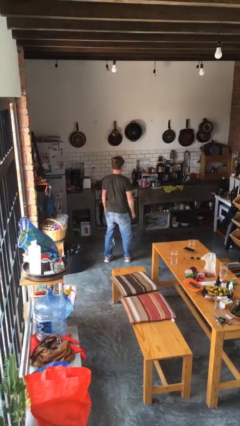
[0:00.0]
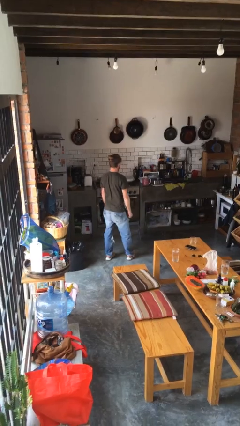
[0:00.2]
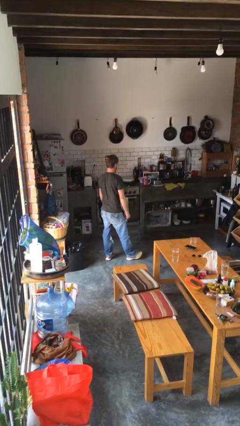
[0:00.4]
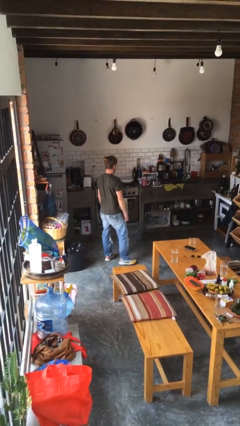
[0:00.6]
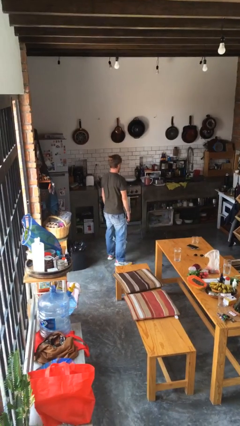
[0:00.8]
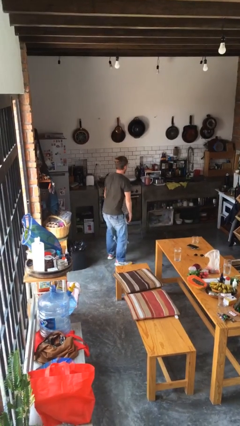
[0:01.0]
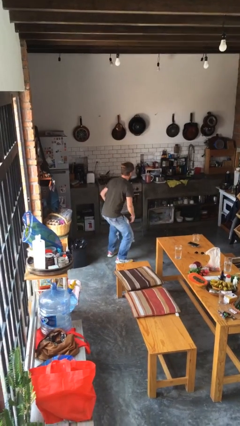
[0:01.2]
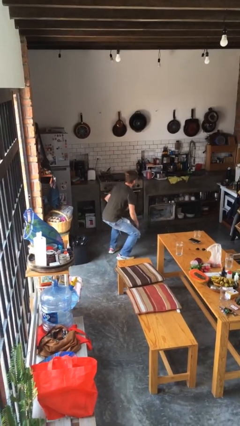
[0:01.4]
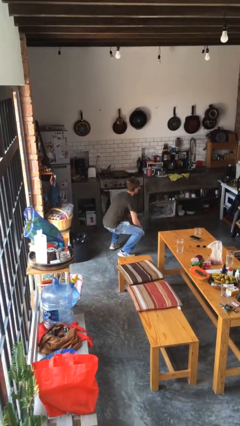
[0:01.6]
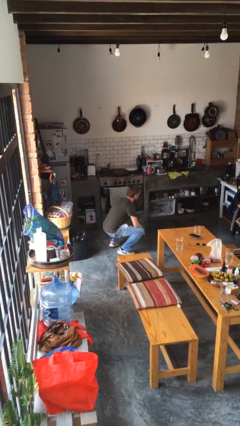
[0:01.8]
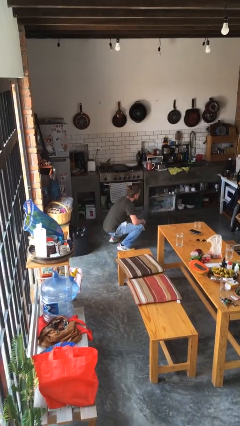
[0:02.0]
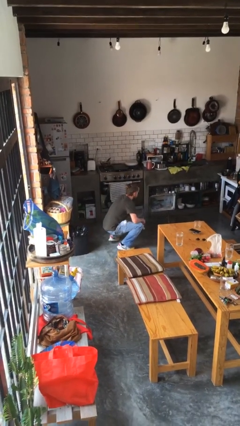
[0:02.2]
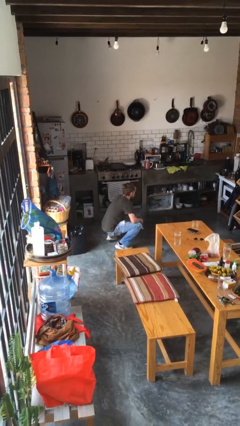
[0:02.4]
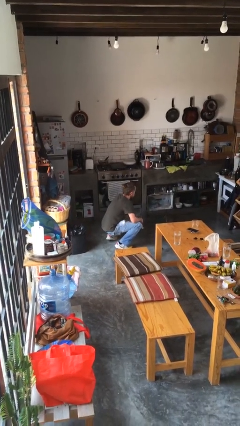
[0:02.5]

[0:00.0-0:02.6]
person squats

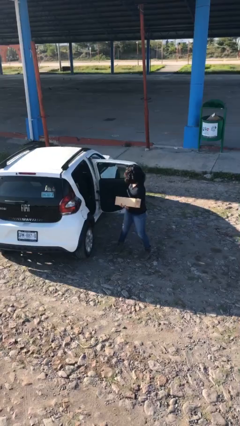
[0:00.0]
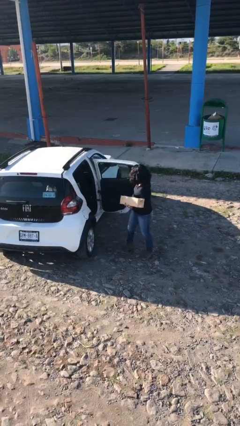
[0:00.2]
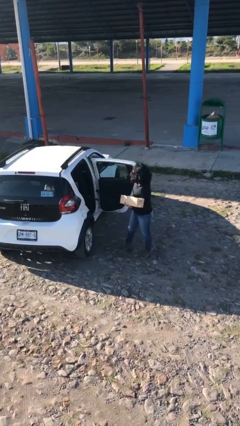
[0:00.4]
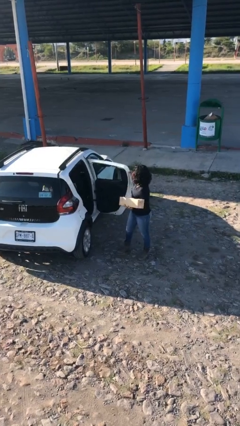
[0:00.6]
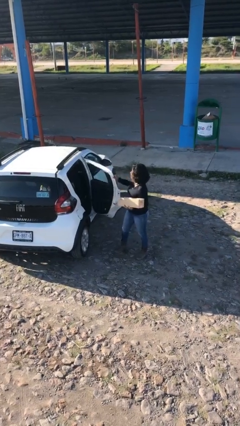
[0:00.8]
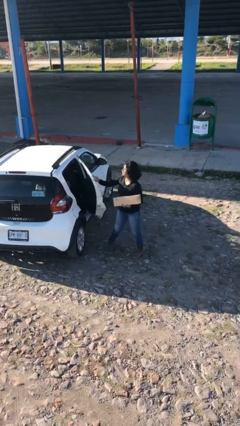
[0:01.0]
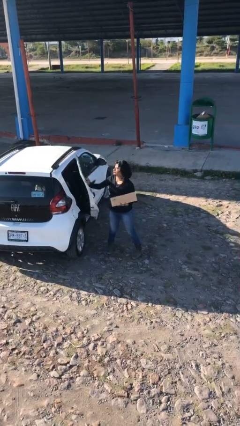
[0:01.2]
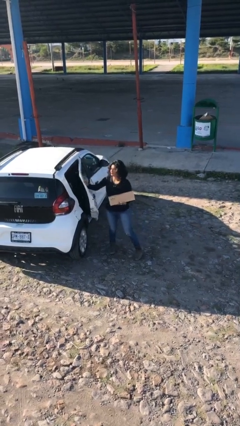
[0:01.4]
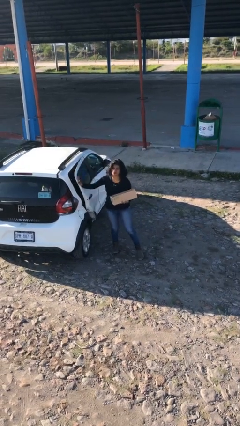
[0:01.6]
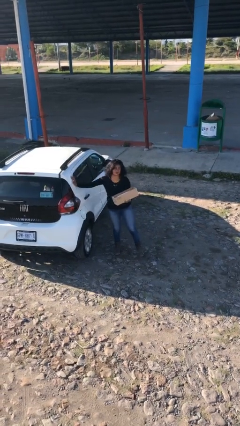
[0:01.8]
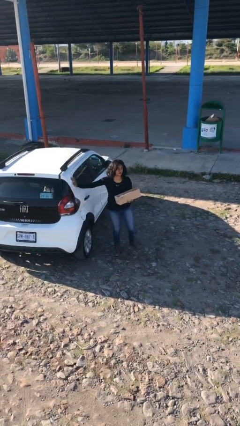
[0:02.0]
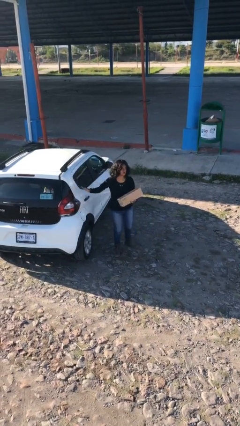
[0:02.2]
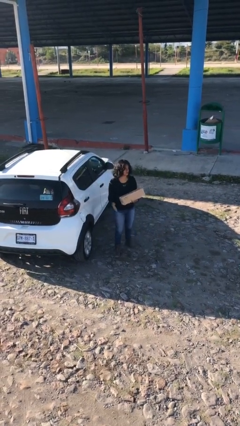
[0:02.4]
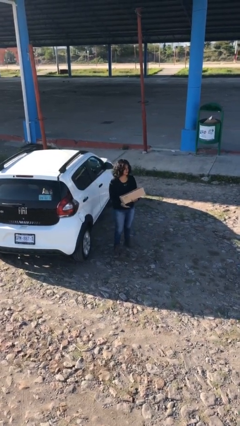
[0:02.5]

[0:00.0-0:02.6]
person closes car door

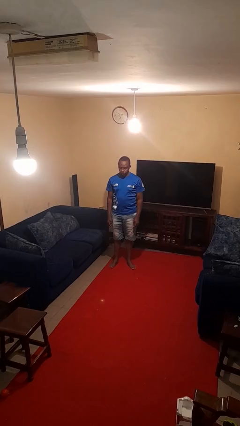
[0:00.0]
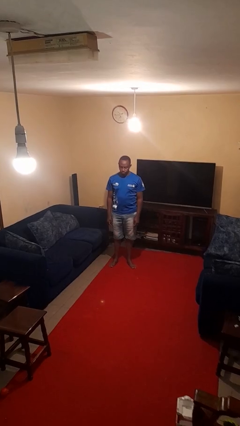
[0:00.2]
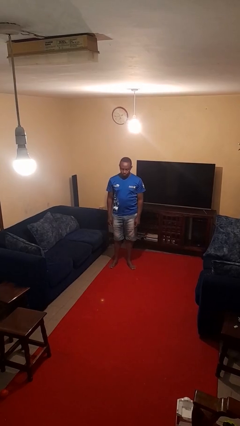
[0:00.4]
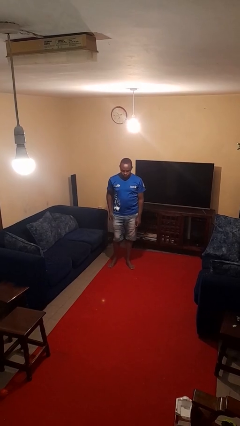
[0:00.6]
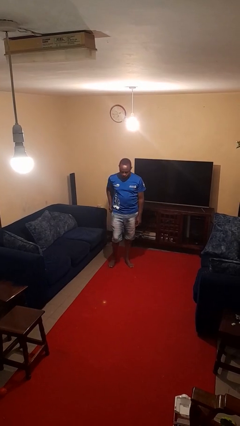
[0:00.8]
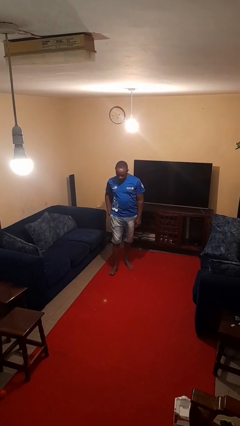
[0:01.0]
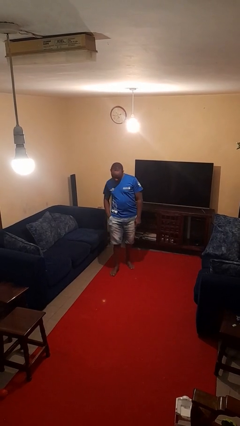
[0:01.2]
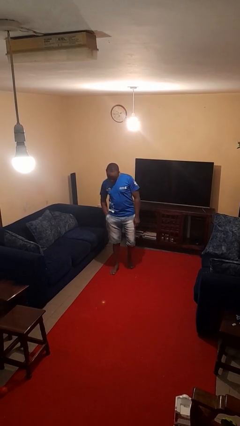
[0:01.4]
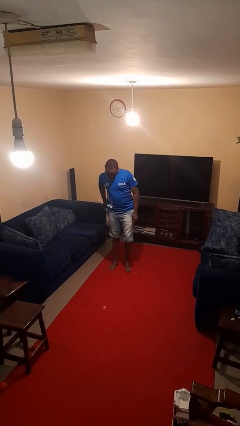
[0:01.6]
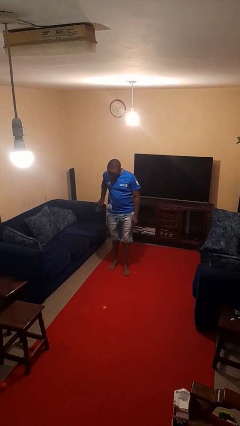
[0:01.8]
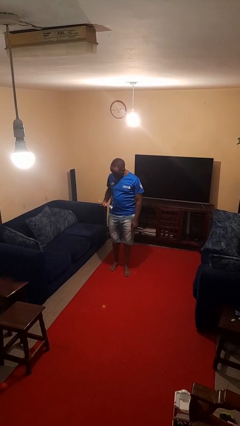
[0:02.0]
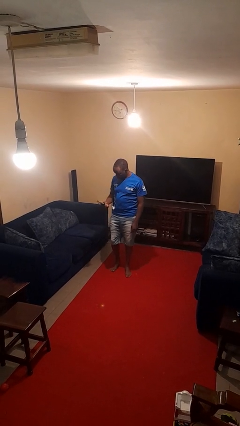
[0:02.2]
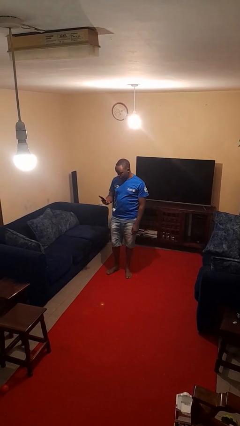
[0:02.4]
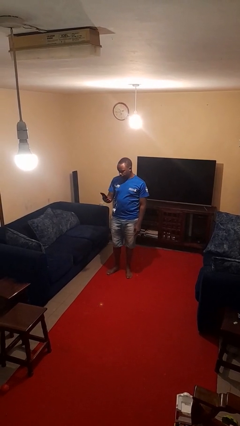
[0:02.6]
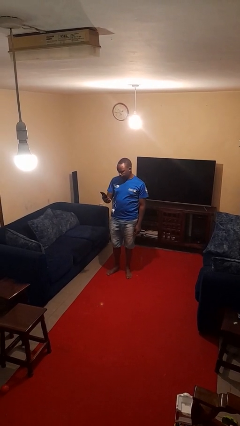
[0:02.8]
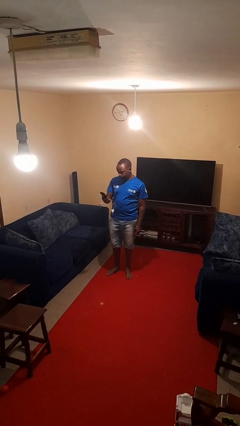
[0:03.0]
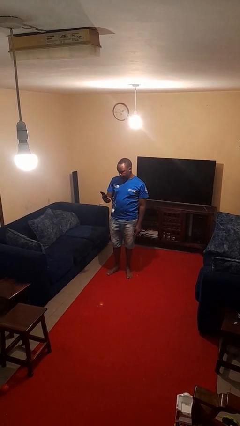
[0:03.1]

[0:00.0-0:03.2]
person takes phone from pocket

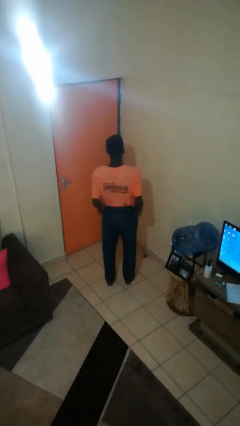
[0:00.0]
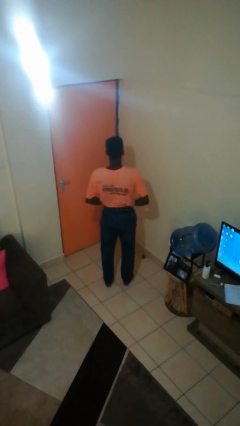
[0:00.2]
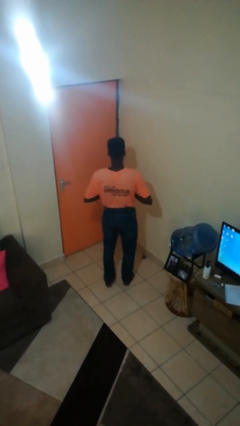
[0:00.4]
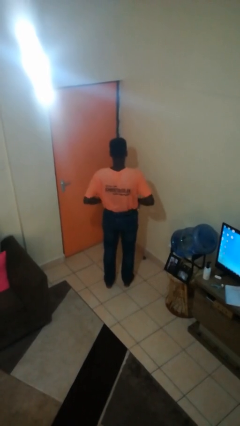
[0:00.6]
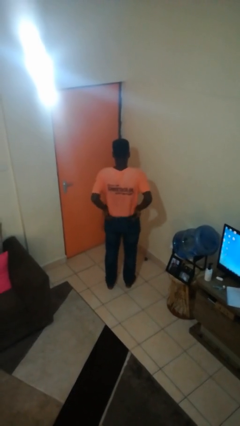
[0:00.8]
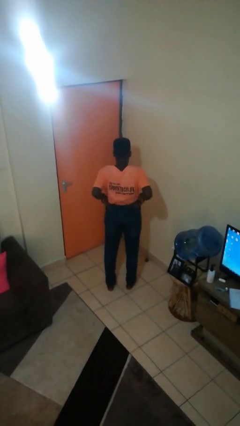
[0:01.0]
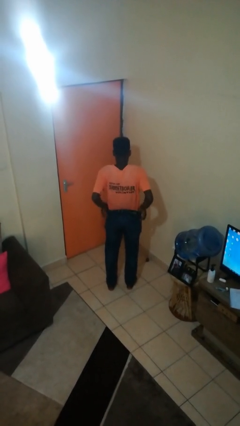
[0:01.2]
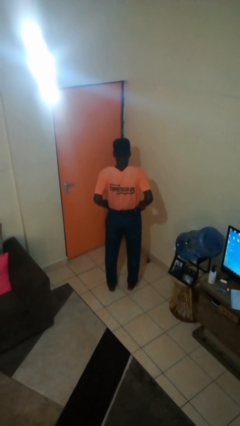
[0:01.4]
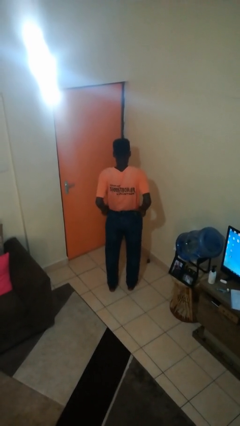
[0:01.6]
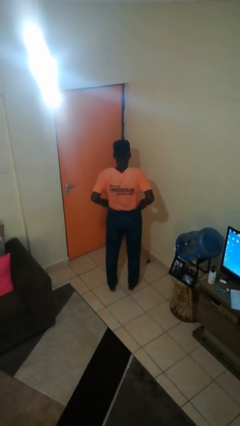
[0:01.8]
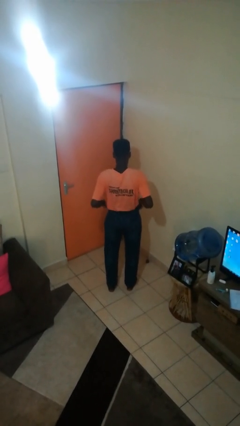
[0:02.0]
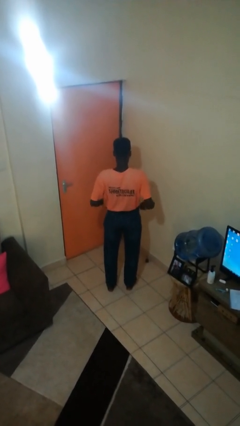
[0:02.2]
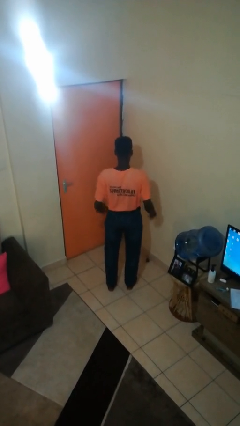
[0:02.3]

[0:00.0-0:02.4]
person hikes up pants

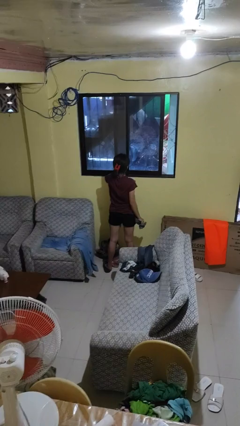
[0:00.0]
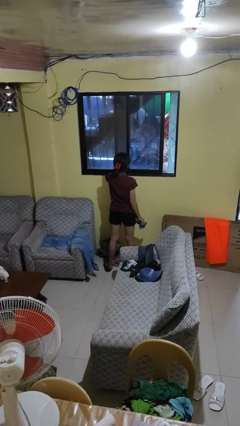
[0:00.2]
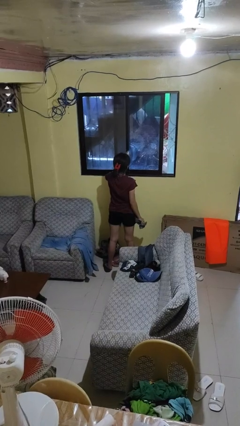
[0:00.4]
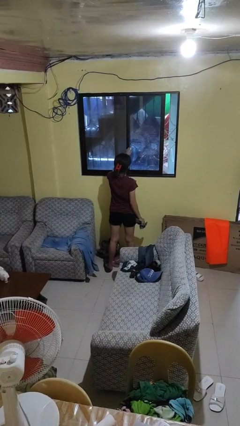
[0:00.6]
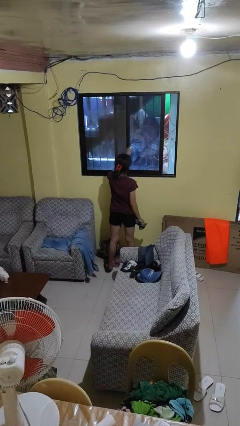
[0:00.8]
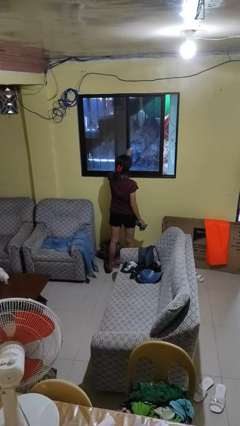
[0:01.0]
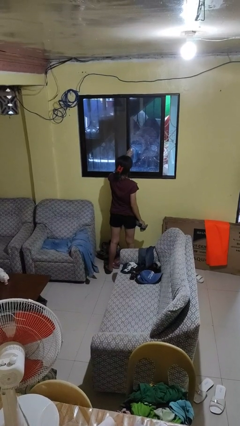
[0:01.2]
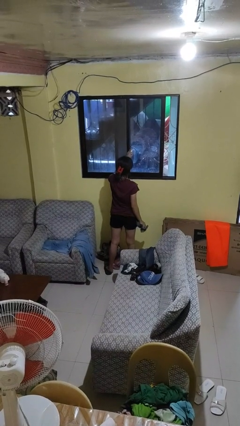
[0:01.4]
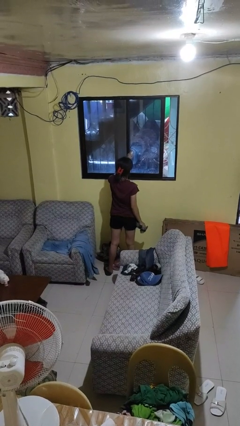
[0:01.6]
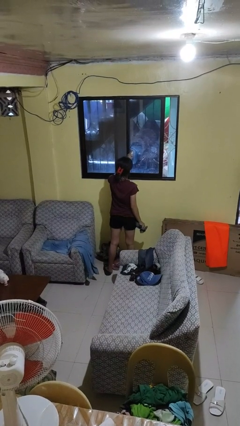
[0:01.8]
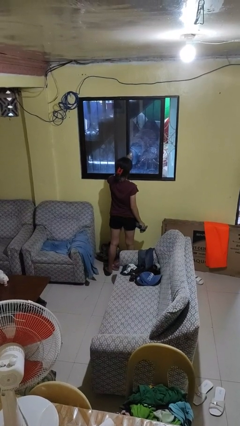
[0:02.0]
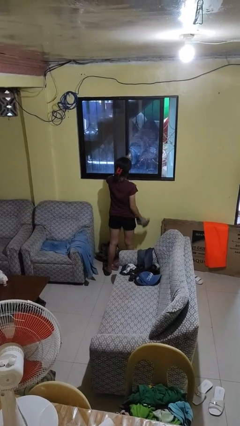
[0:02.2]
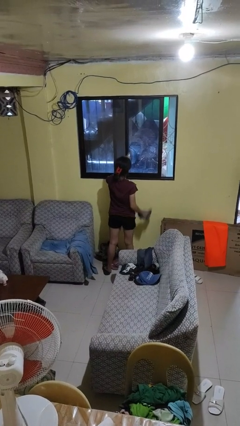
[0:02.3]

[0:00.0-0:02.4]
person sprays from bottle

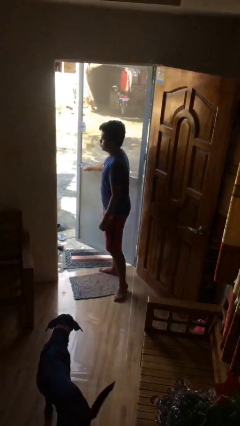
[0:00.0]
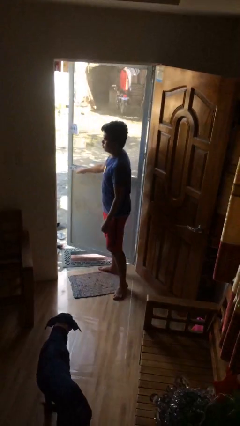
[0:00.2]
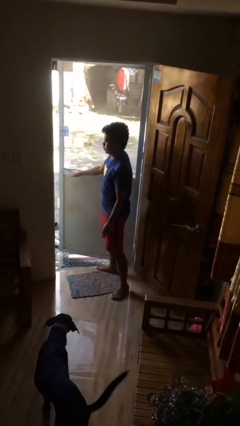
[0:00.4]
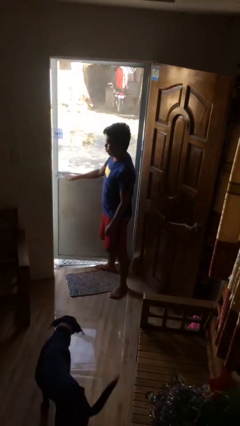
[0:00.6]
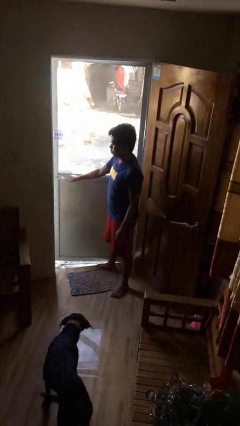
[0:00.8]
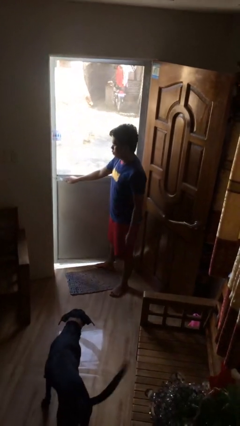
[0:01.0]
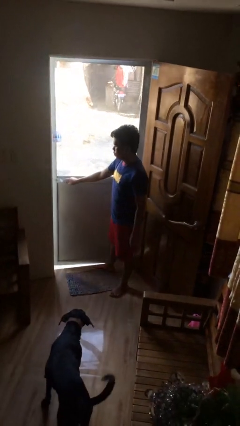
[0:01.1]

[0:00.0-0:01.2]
person closes facility door

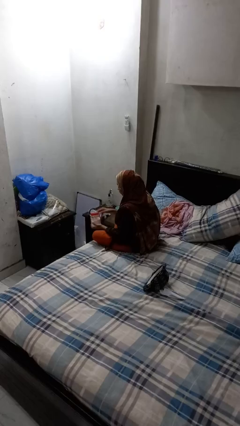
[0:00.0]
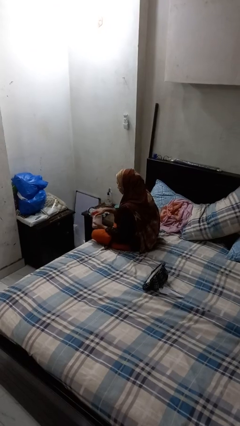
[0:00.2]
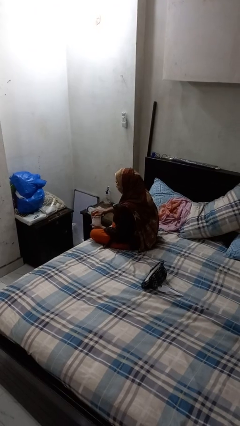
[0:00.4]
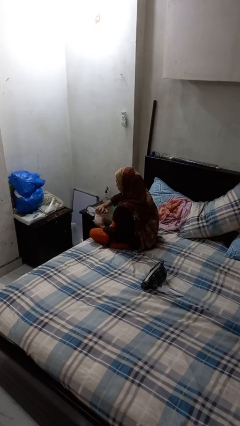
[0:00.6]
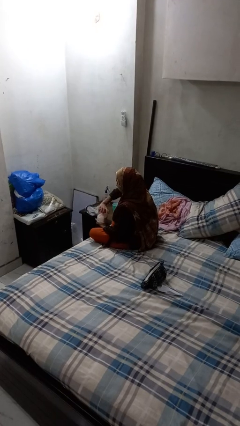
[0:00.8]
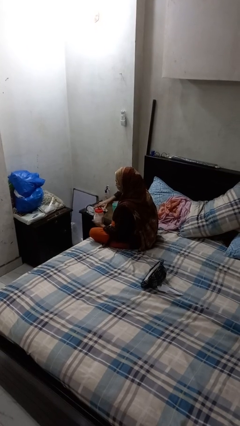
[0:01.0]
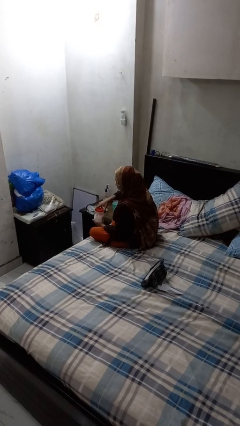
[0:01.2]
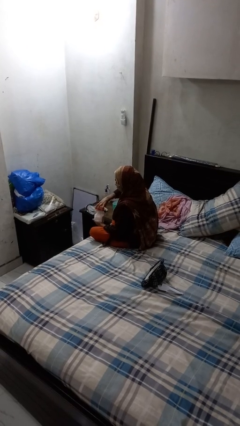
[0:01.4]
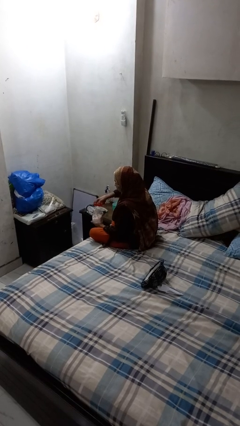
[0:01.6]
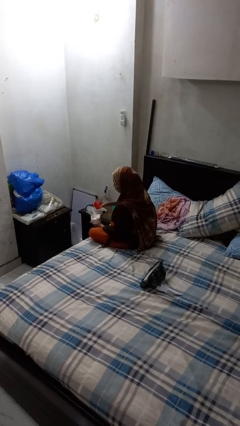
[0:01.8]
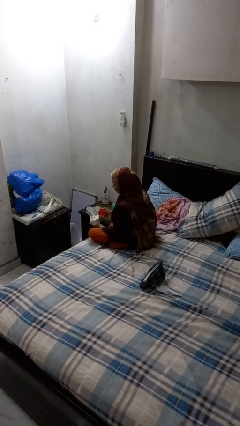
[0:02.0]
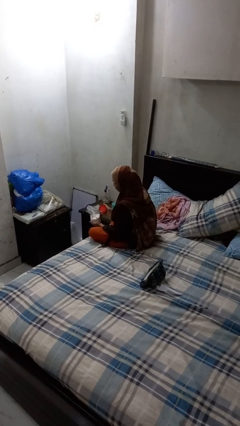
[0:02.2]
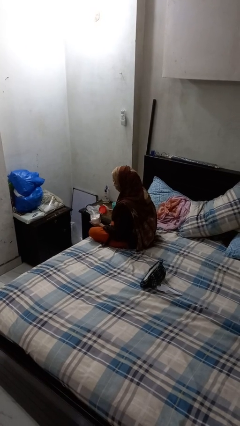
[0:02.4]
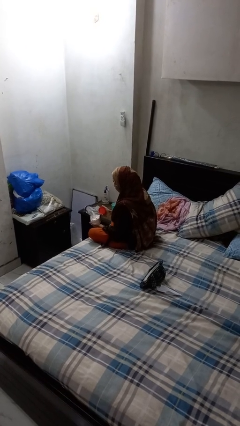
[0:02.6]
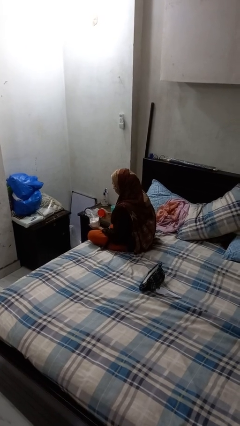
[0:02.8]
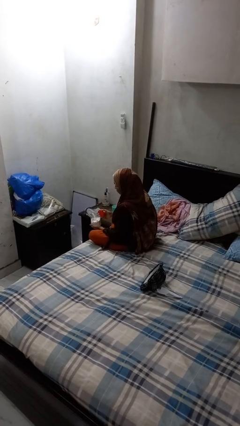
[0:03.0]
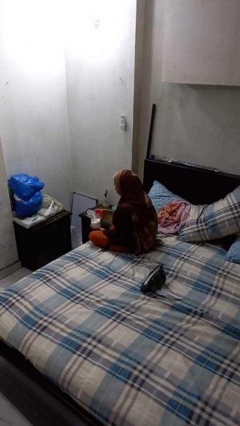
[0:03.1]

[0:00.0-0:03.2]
person opens jar
